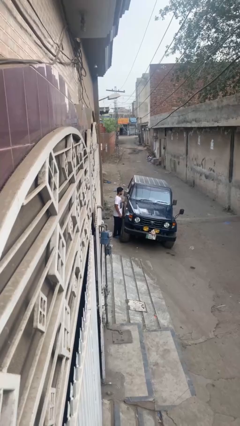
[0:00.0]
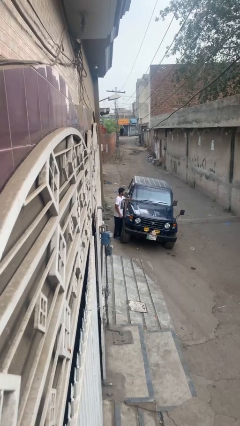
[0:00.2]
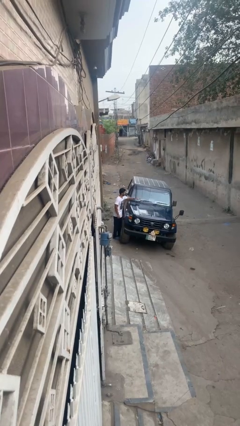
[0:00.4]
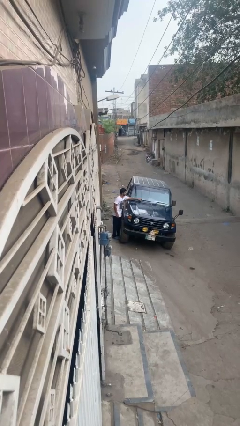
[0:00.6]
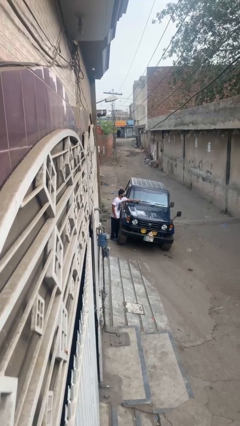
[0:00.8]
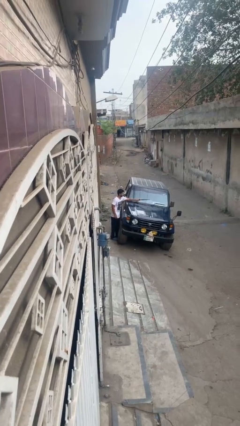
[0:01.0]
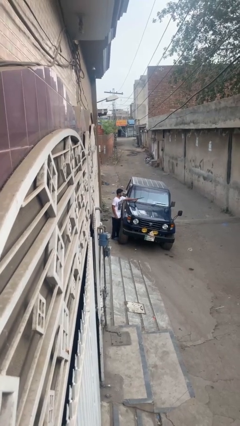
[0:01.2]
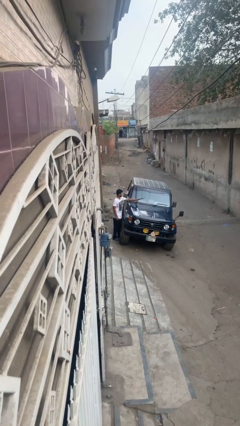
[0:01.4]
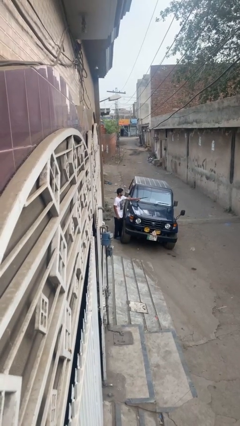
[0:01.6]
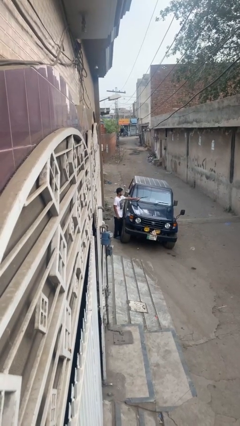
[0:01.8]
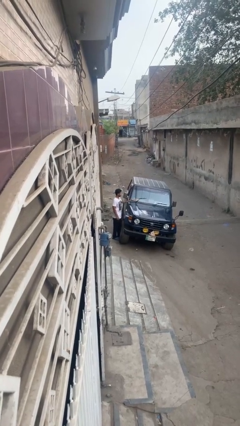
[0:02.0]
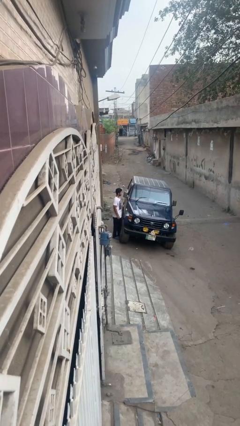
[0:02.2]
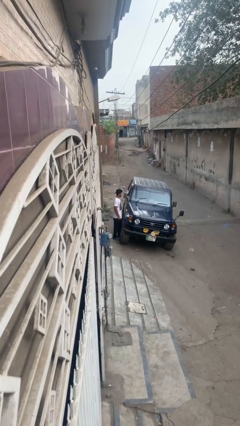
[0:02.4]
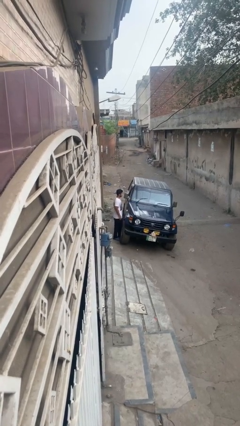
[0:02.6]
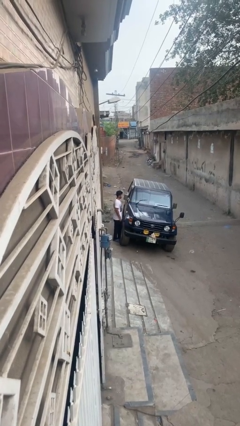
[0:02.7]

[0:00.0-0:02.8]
person flips up car wipers

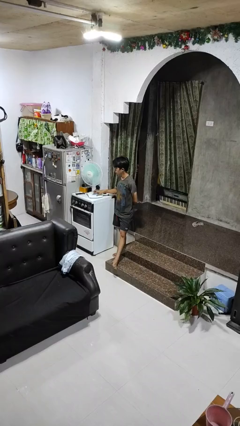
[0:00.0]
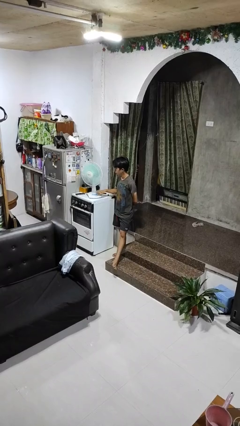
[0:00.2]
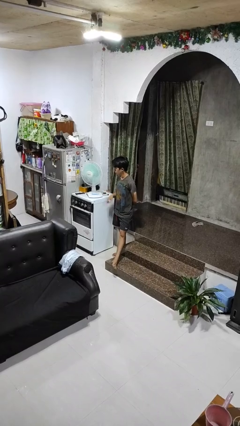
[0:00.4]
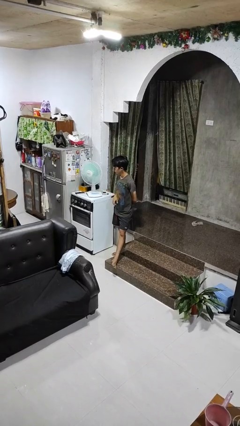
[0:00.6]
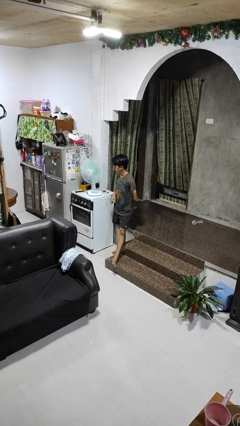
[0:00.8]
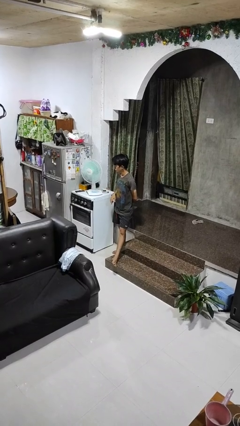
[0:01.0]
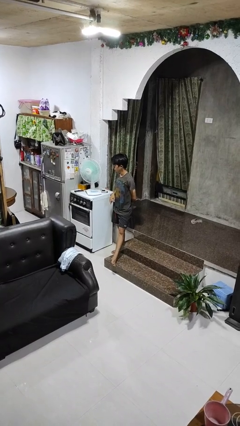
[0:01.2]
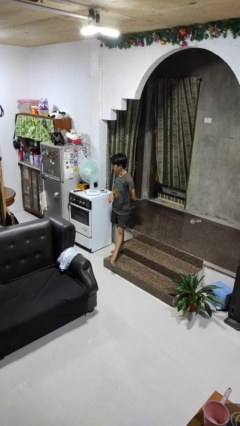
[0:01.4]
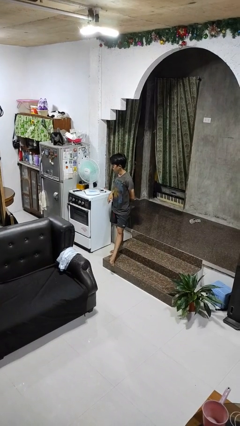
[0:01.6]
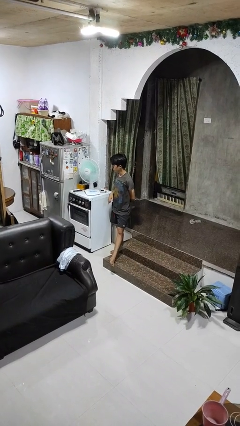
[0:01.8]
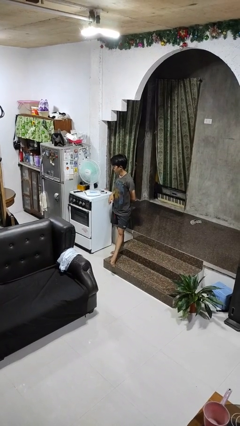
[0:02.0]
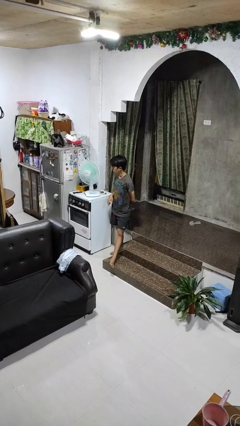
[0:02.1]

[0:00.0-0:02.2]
person turns off fan

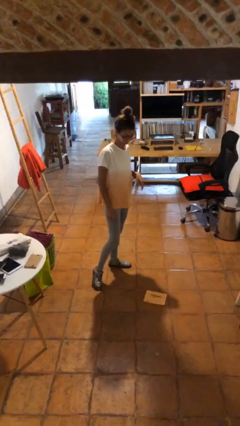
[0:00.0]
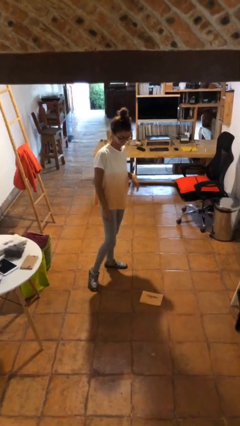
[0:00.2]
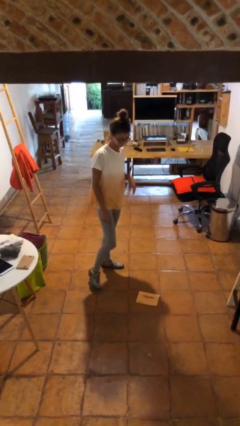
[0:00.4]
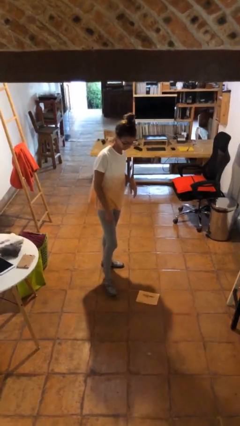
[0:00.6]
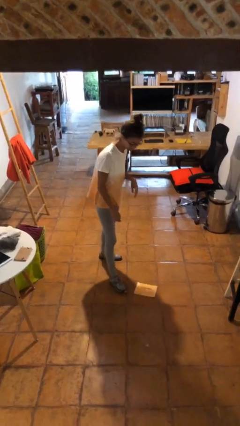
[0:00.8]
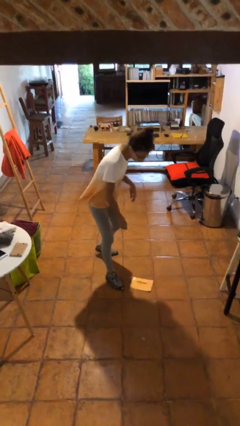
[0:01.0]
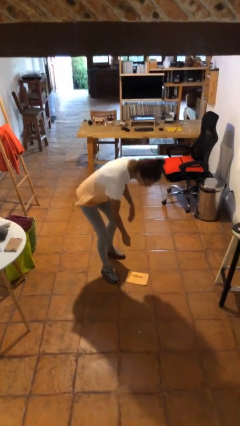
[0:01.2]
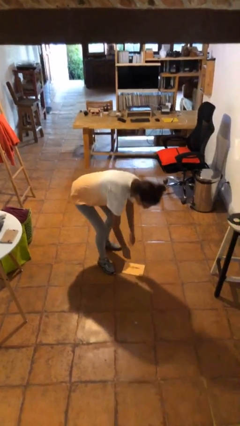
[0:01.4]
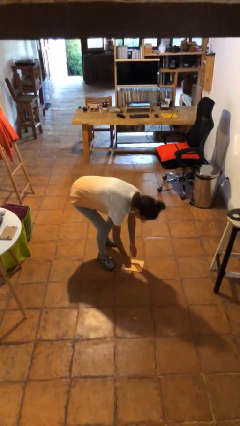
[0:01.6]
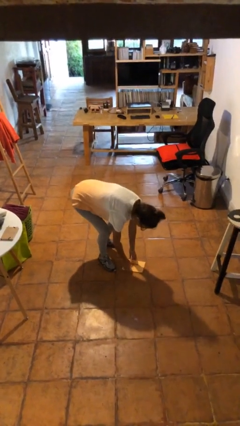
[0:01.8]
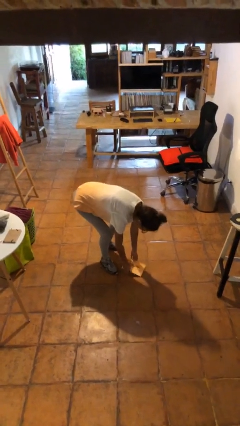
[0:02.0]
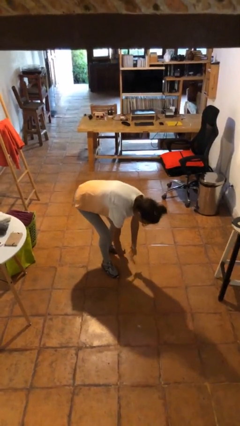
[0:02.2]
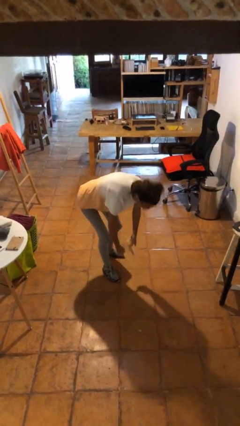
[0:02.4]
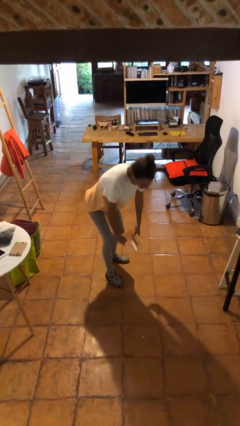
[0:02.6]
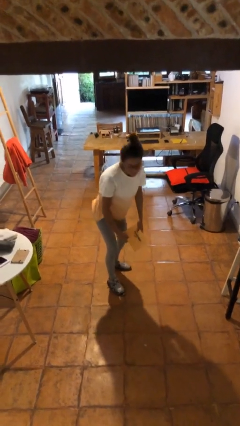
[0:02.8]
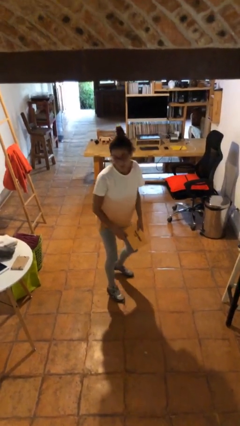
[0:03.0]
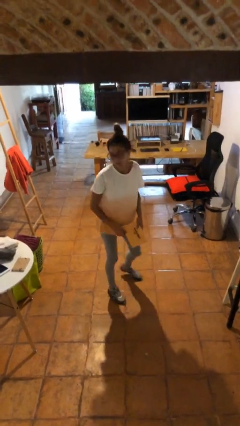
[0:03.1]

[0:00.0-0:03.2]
person picks up object from floor

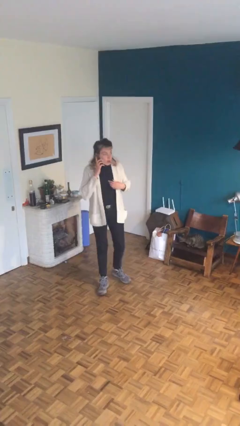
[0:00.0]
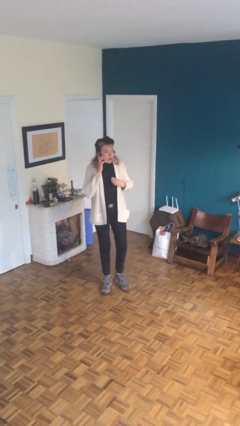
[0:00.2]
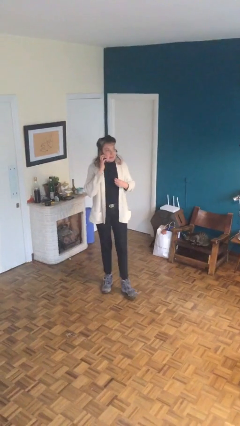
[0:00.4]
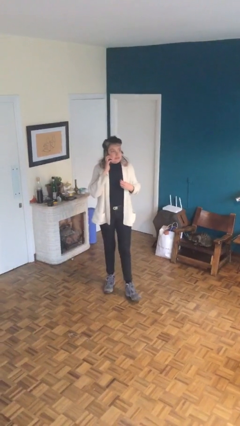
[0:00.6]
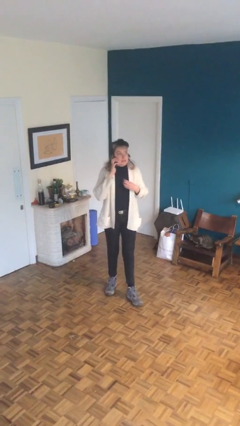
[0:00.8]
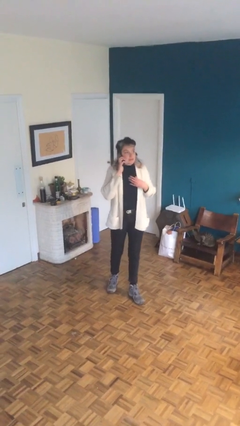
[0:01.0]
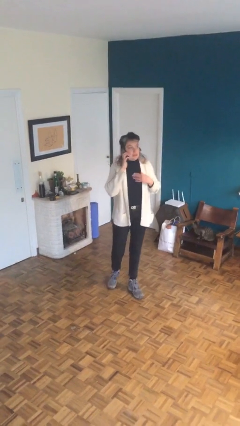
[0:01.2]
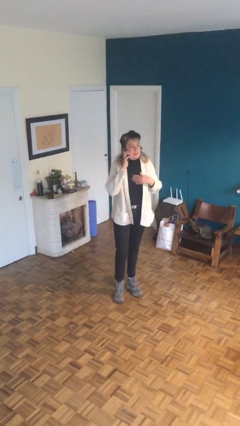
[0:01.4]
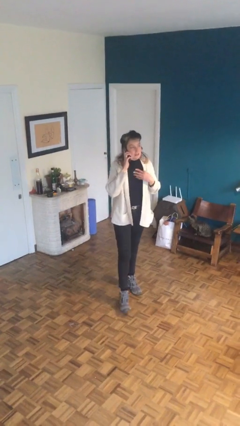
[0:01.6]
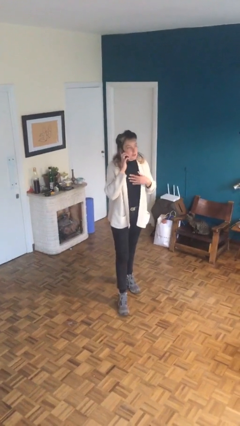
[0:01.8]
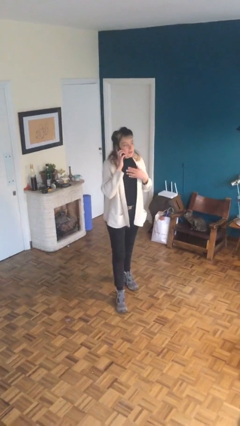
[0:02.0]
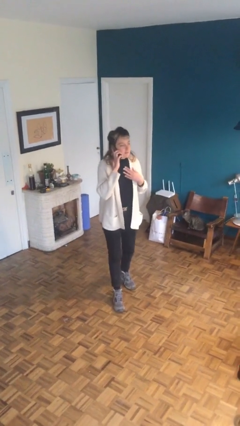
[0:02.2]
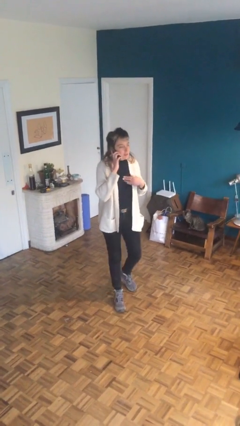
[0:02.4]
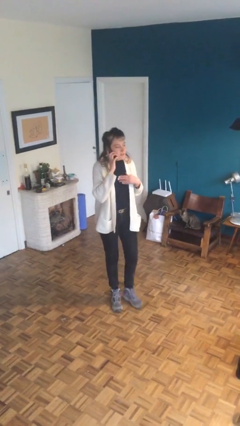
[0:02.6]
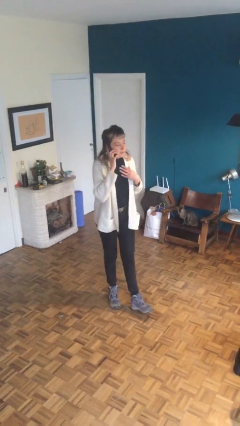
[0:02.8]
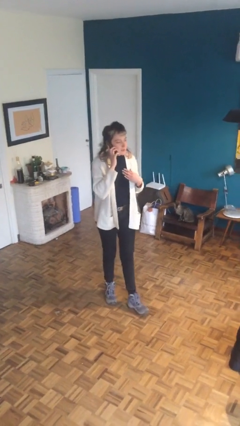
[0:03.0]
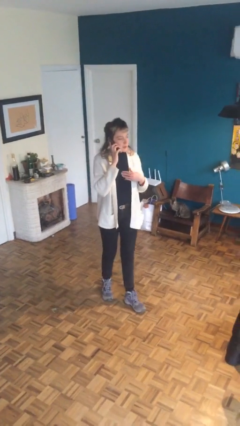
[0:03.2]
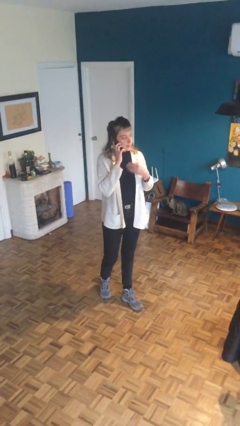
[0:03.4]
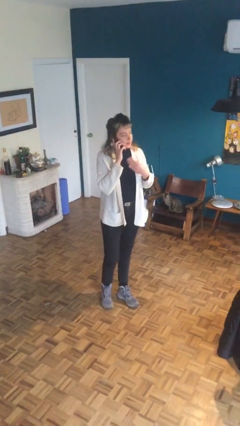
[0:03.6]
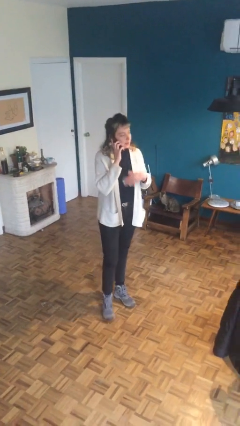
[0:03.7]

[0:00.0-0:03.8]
person talks on phone

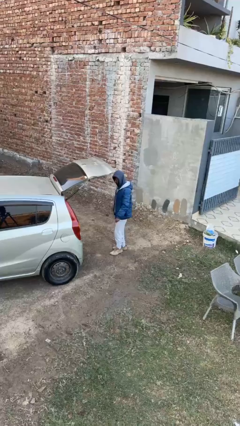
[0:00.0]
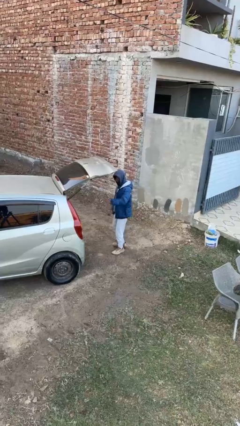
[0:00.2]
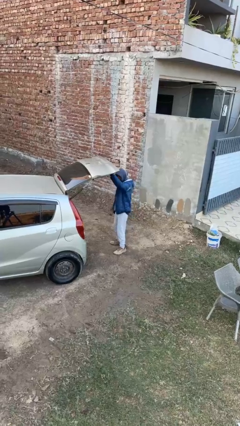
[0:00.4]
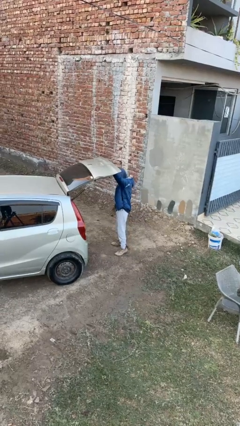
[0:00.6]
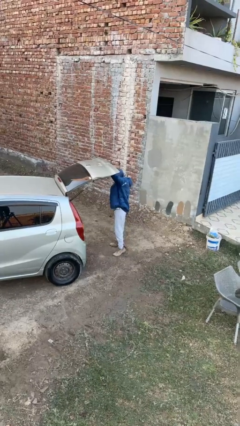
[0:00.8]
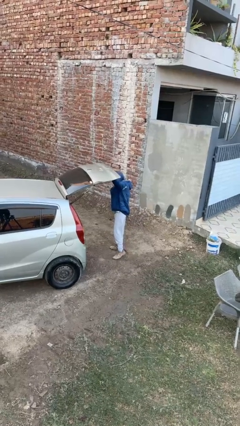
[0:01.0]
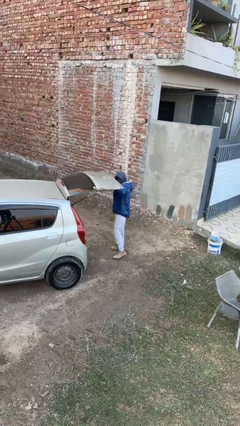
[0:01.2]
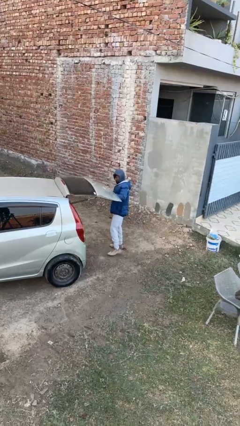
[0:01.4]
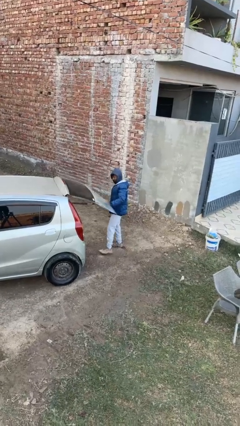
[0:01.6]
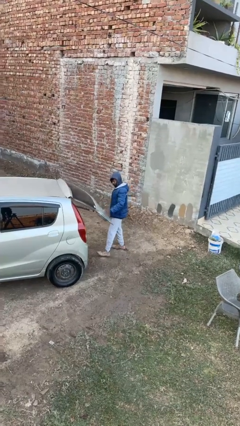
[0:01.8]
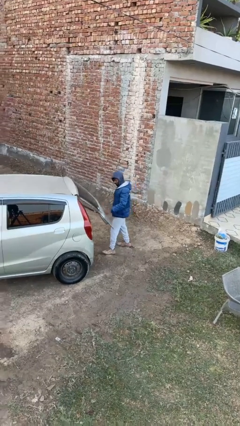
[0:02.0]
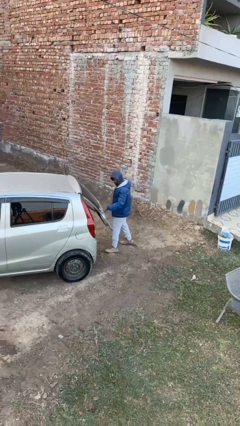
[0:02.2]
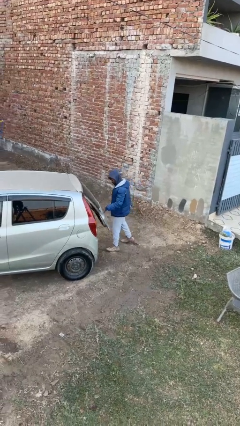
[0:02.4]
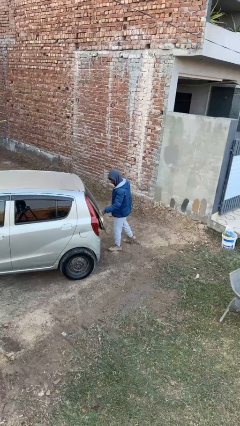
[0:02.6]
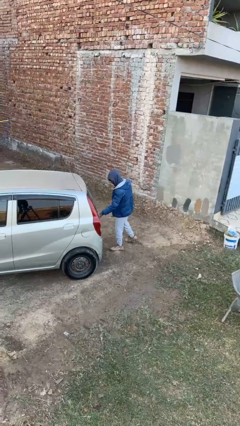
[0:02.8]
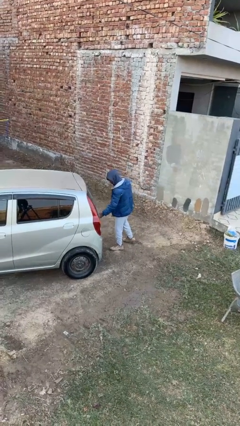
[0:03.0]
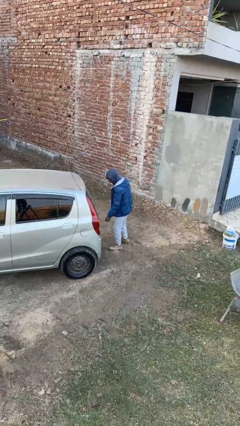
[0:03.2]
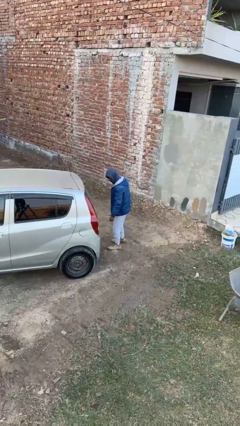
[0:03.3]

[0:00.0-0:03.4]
person closes car trunk

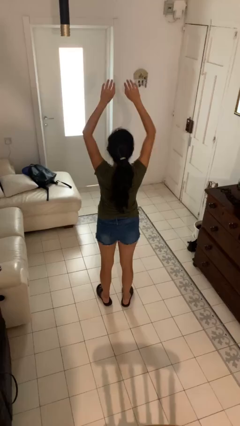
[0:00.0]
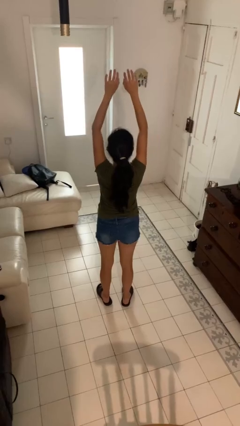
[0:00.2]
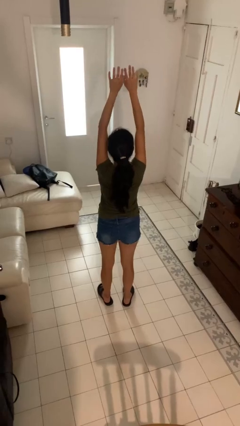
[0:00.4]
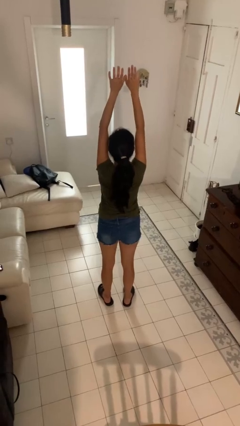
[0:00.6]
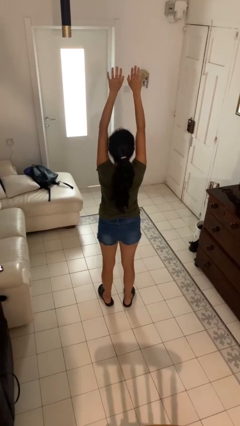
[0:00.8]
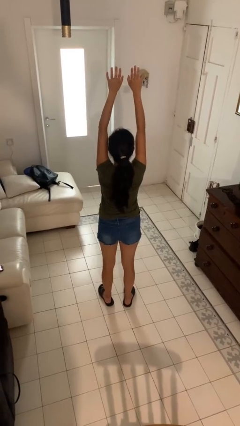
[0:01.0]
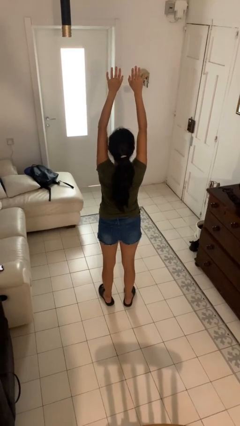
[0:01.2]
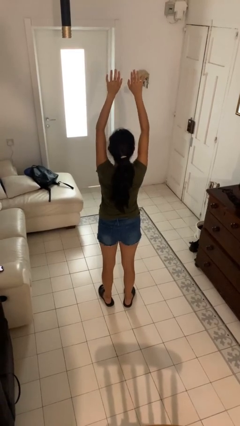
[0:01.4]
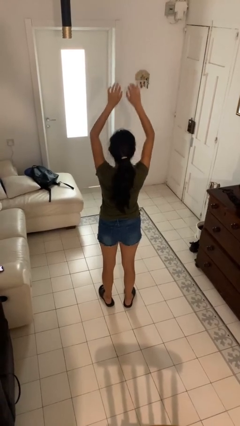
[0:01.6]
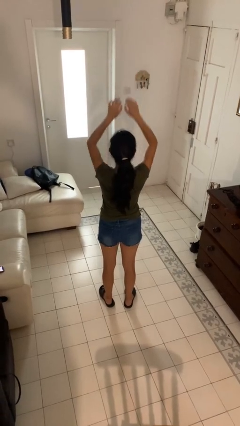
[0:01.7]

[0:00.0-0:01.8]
person stretches arms over head
